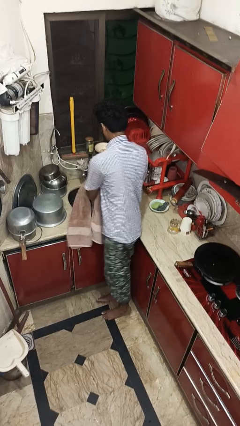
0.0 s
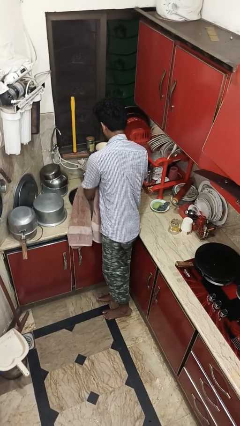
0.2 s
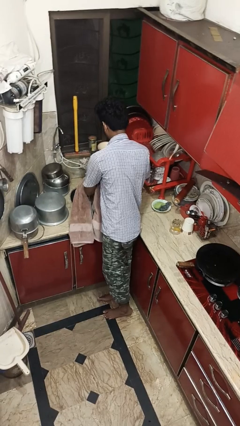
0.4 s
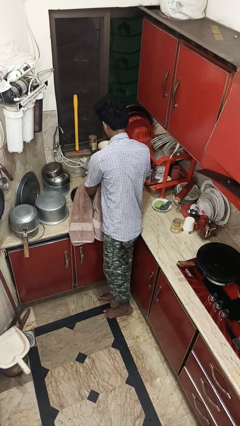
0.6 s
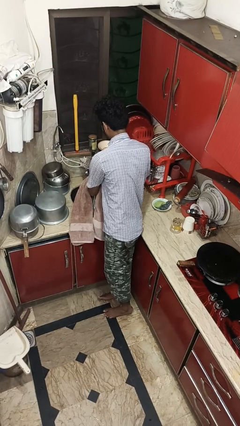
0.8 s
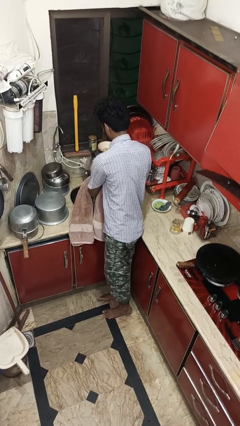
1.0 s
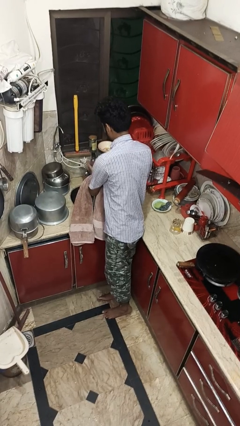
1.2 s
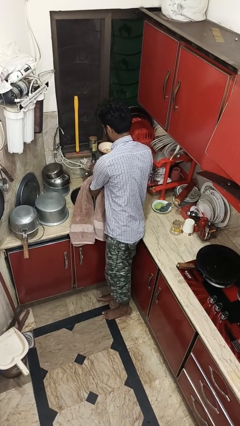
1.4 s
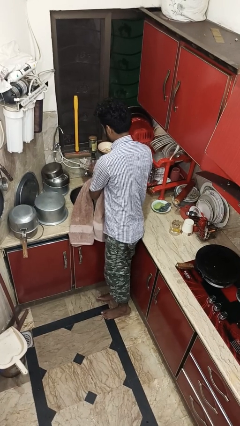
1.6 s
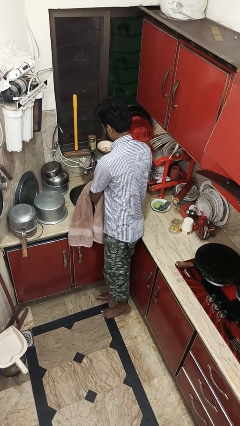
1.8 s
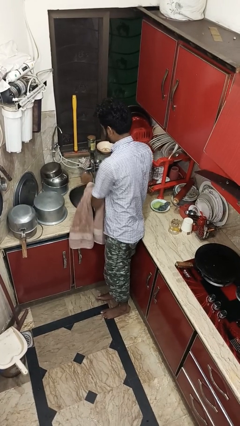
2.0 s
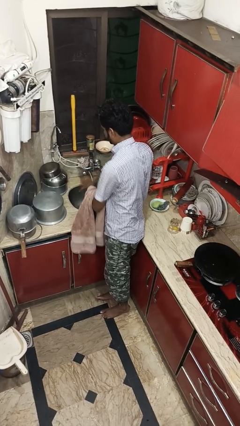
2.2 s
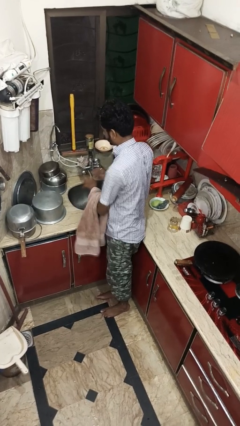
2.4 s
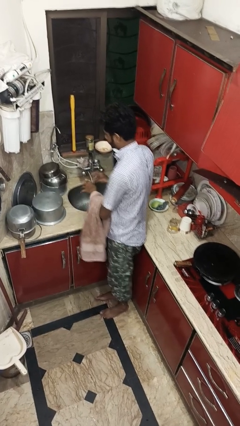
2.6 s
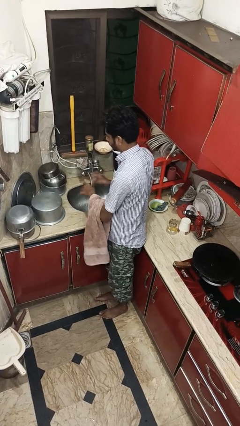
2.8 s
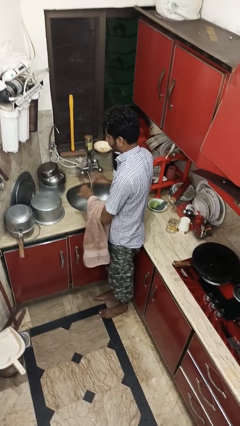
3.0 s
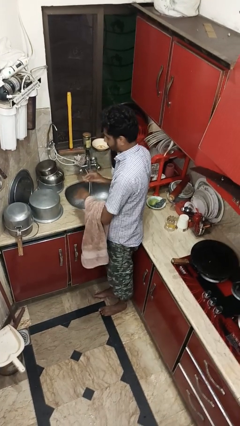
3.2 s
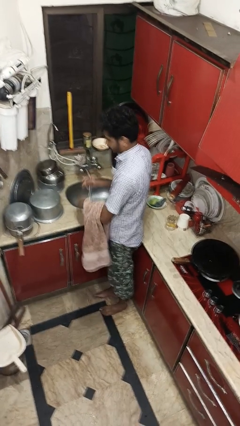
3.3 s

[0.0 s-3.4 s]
person washes hands

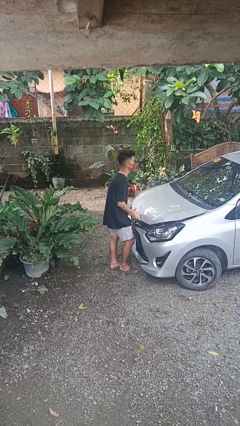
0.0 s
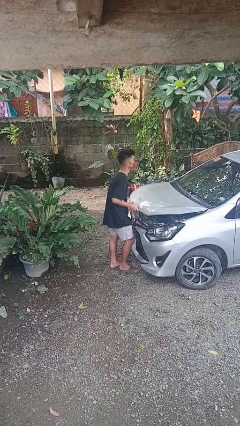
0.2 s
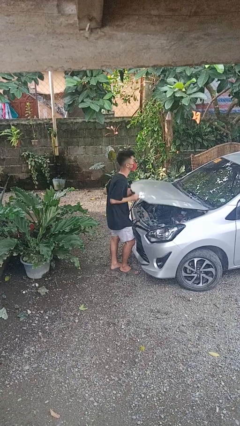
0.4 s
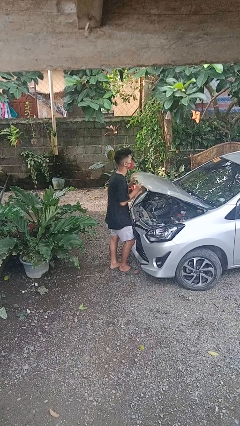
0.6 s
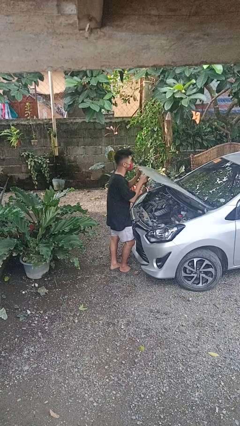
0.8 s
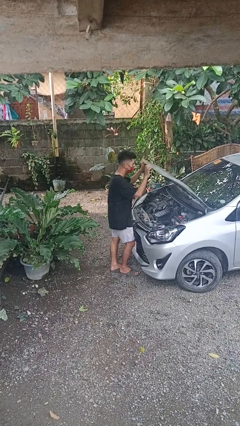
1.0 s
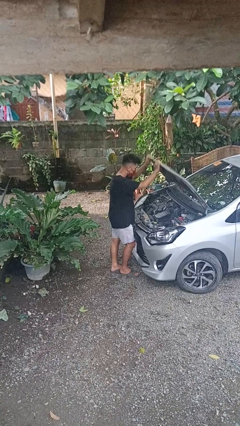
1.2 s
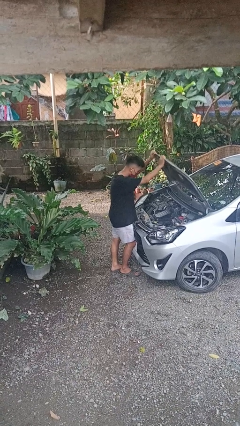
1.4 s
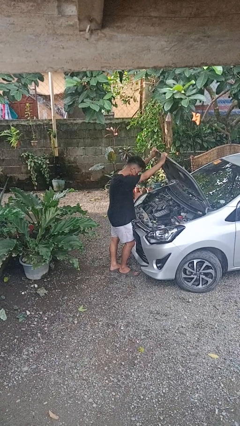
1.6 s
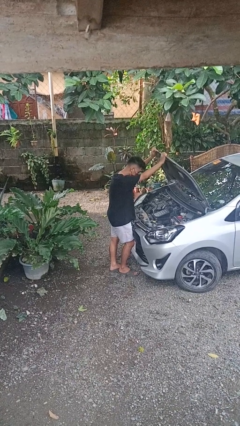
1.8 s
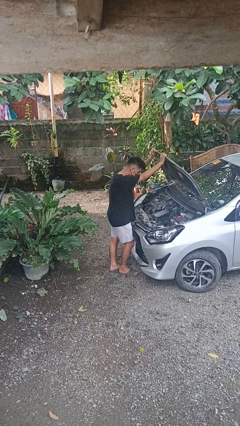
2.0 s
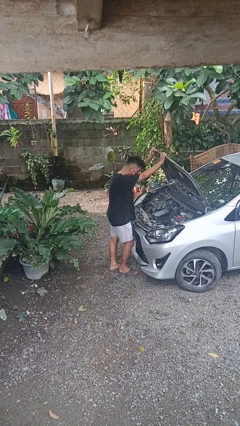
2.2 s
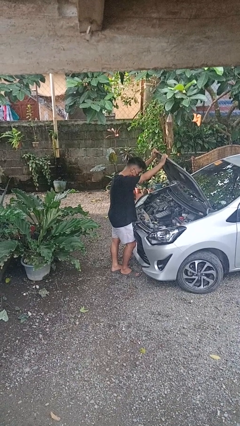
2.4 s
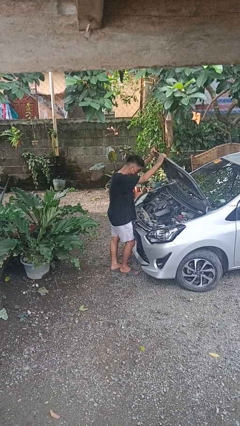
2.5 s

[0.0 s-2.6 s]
person opens car hood

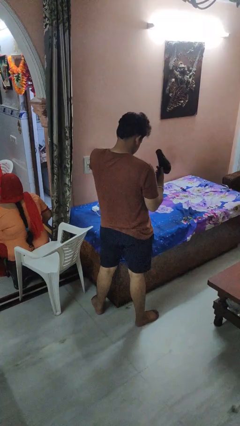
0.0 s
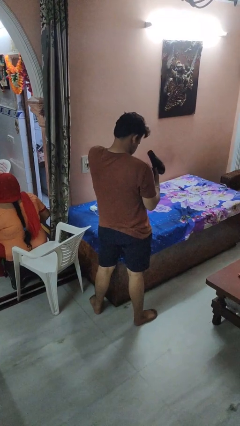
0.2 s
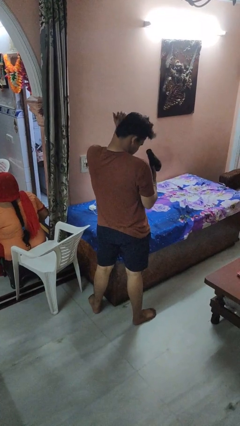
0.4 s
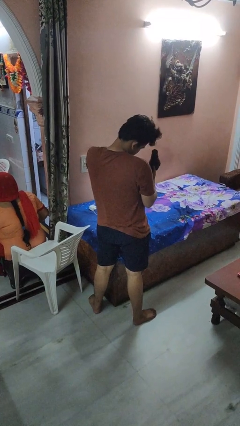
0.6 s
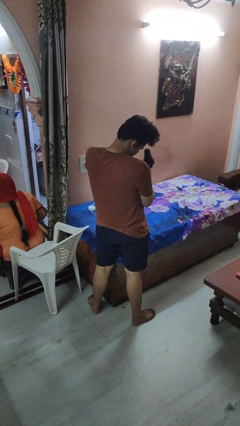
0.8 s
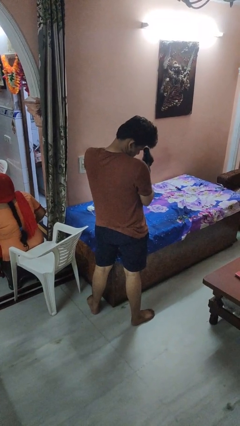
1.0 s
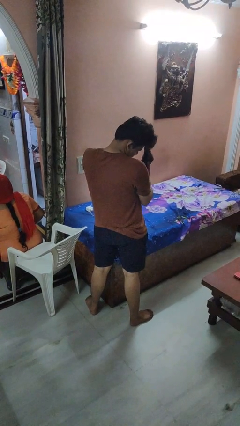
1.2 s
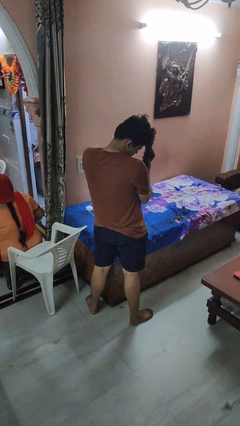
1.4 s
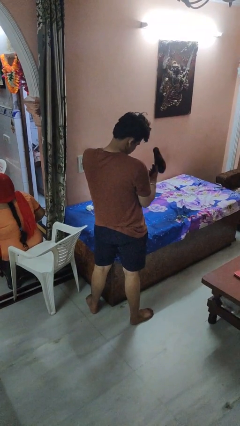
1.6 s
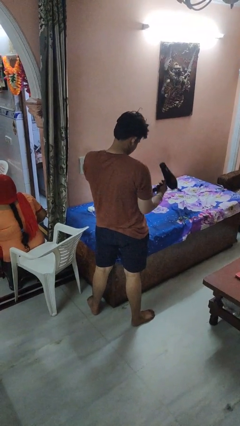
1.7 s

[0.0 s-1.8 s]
person dries hair with hairdryer

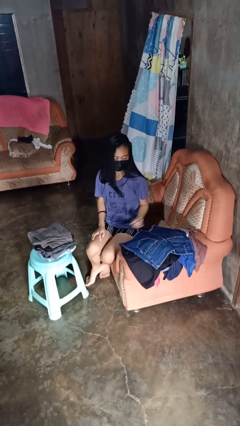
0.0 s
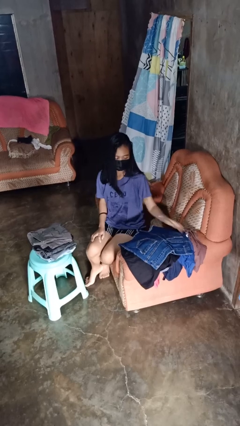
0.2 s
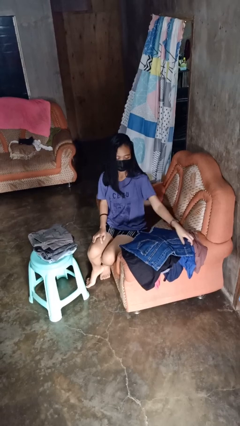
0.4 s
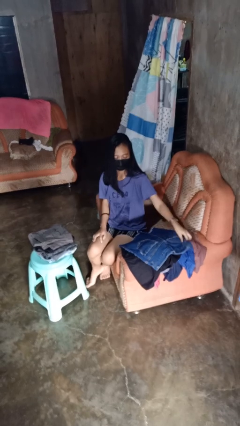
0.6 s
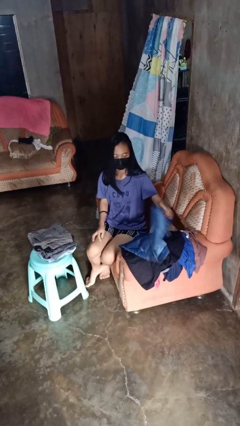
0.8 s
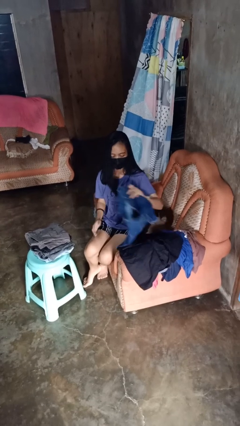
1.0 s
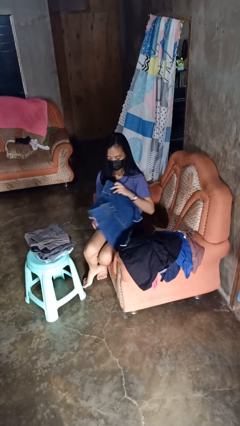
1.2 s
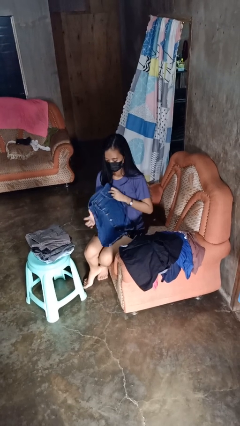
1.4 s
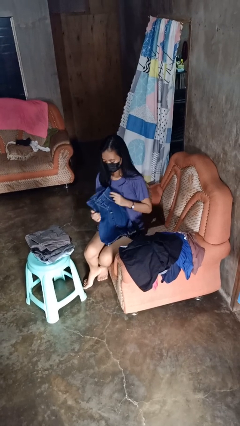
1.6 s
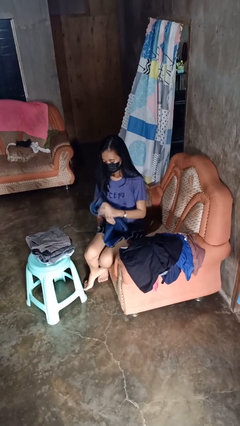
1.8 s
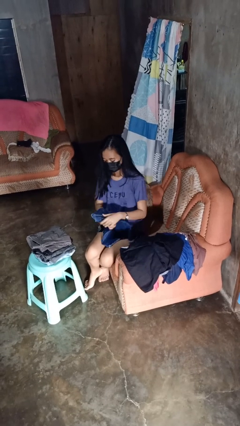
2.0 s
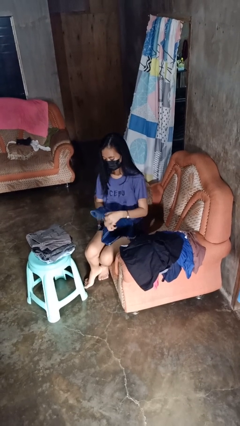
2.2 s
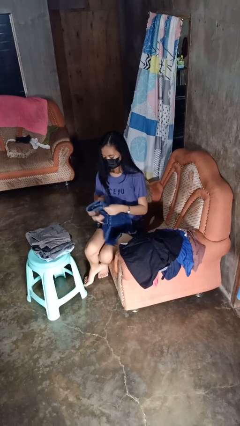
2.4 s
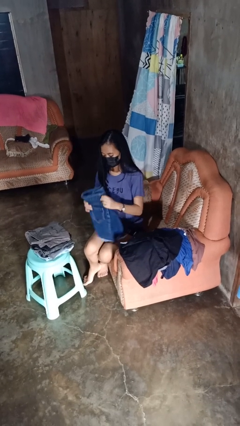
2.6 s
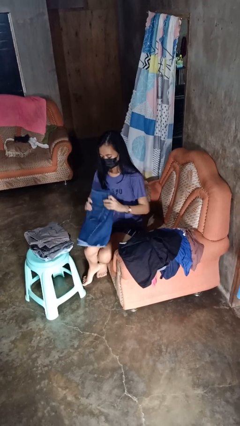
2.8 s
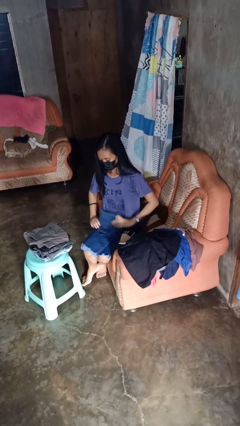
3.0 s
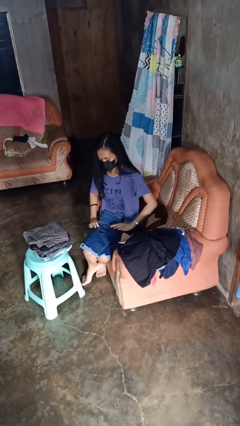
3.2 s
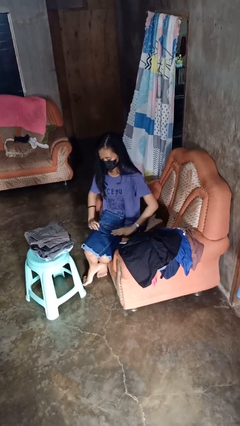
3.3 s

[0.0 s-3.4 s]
person folds pants

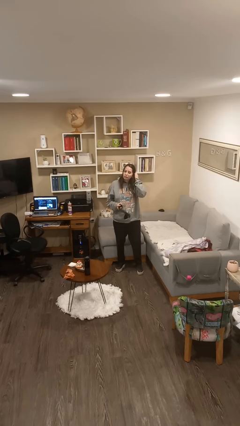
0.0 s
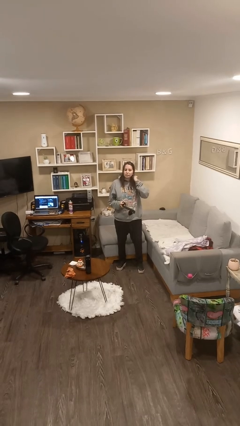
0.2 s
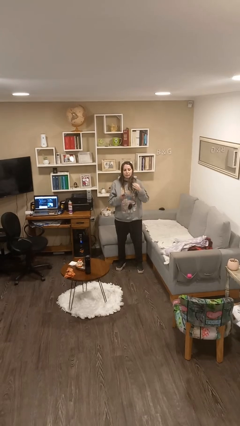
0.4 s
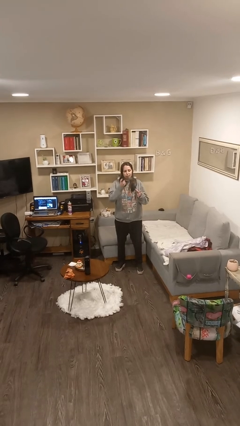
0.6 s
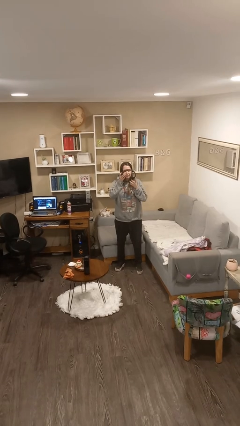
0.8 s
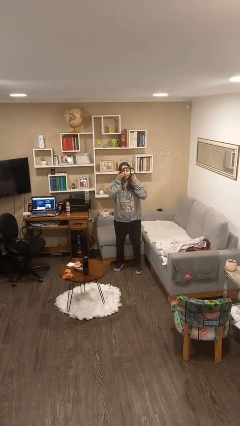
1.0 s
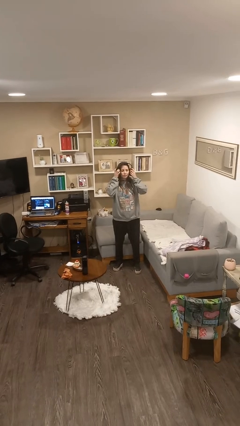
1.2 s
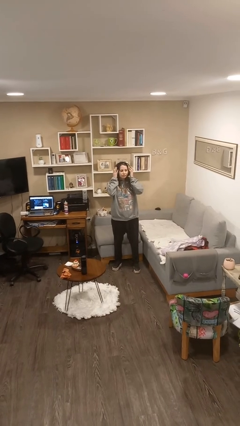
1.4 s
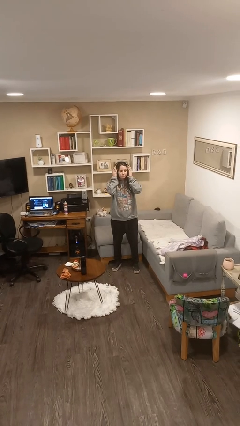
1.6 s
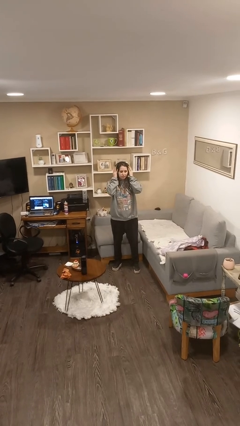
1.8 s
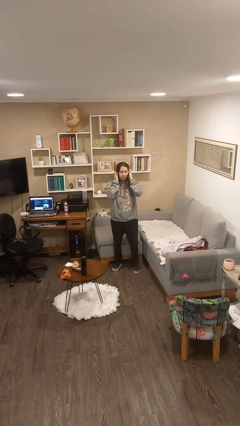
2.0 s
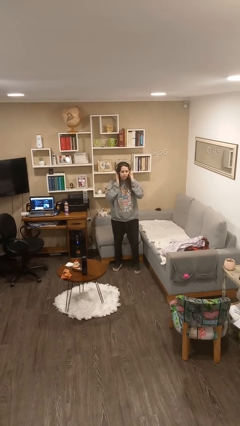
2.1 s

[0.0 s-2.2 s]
person puts on headphones

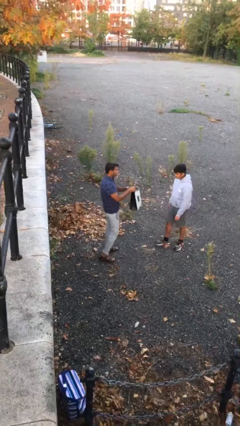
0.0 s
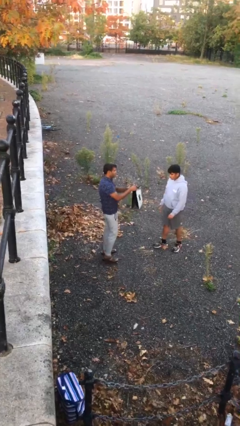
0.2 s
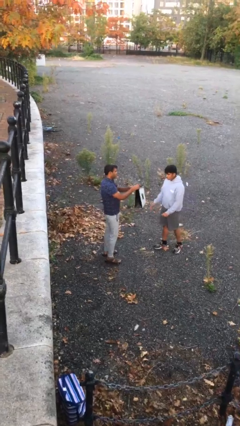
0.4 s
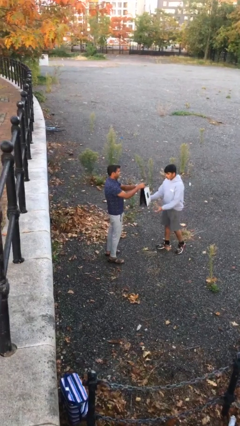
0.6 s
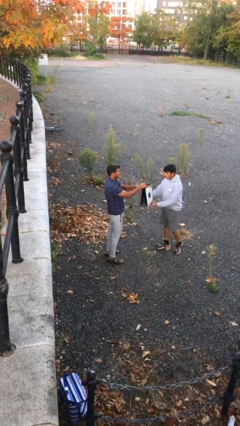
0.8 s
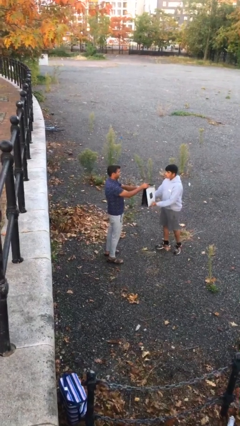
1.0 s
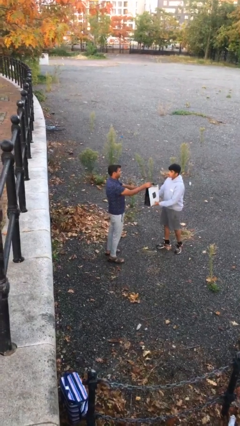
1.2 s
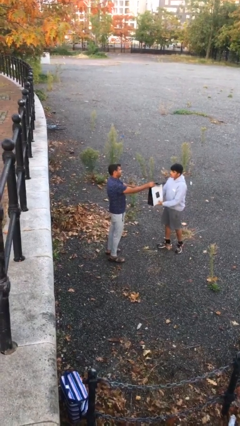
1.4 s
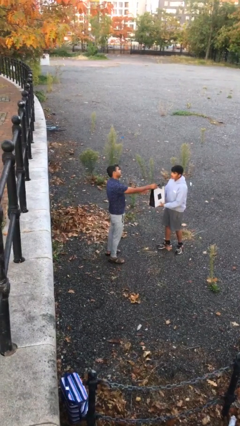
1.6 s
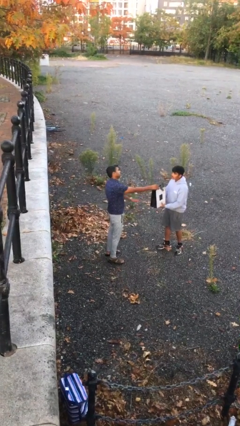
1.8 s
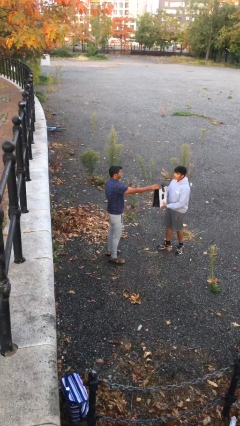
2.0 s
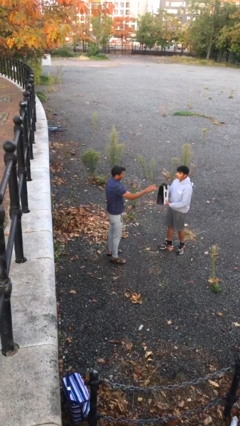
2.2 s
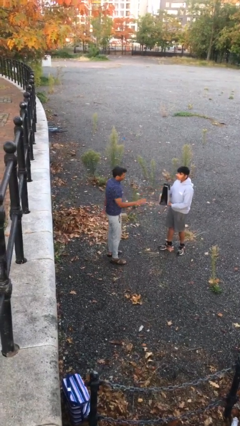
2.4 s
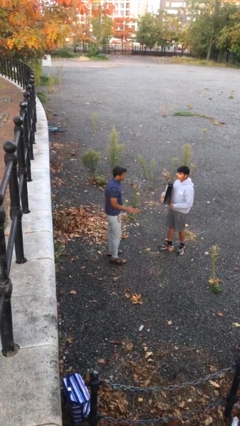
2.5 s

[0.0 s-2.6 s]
person transfers object to person

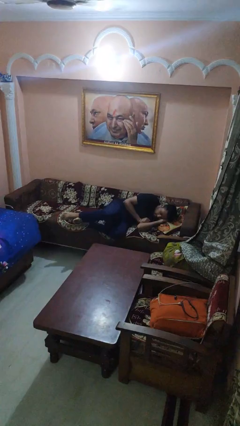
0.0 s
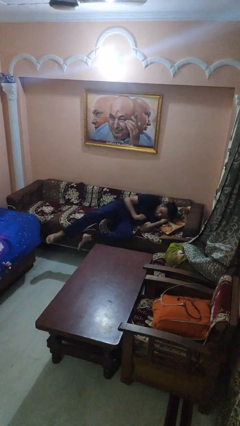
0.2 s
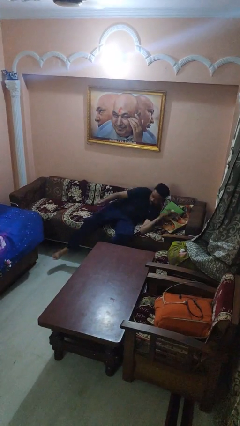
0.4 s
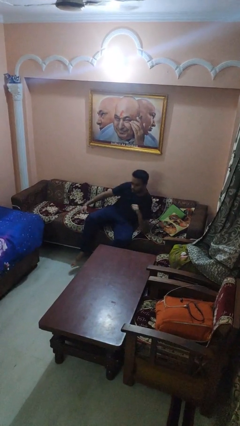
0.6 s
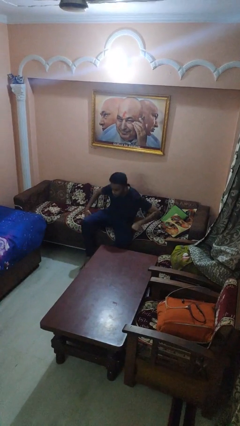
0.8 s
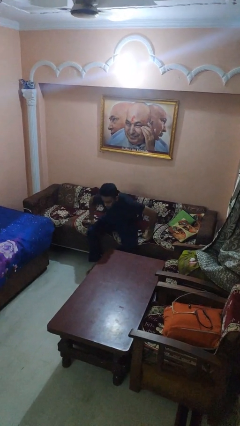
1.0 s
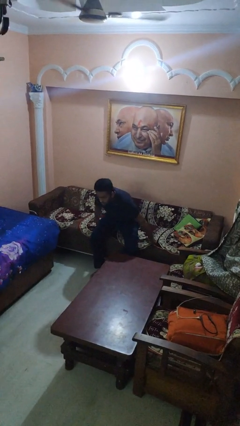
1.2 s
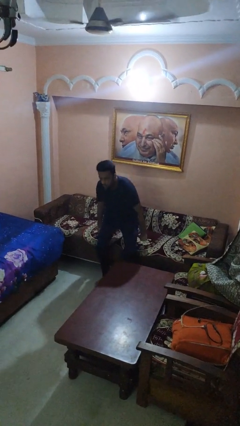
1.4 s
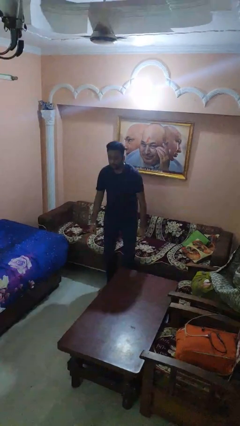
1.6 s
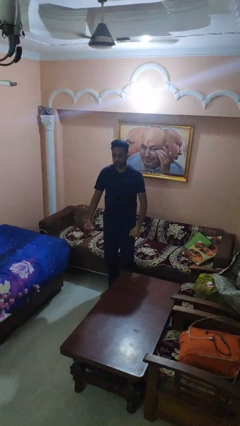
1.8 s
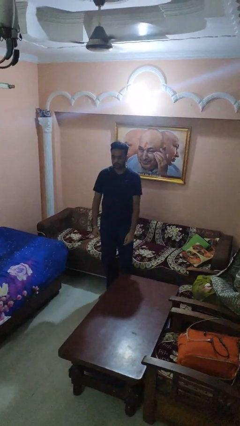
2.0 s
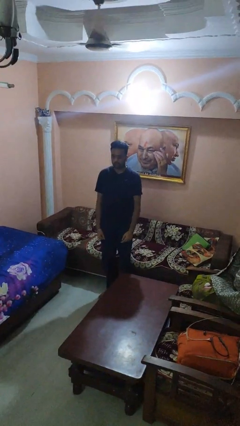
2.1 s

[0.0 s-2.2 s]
person stands up
